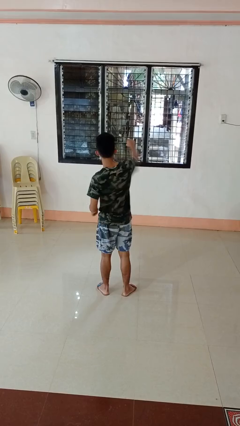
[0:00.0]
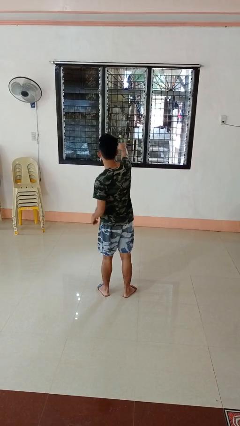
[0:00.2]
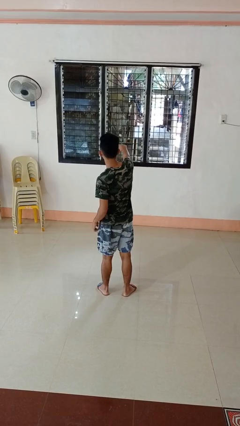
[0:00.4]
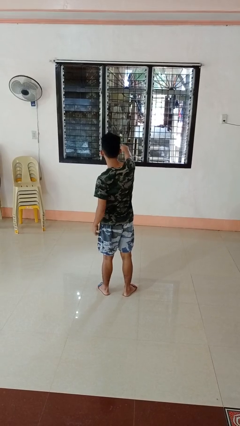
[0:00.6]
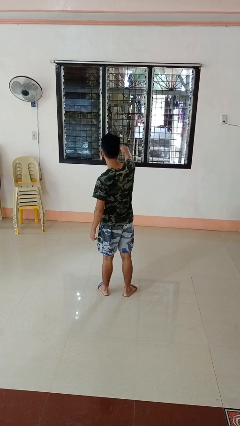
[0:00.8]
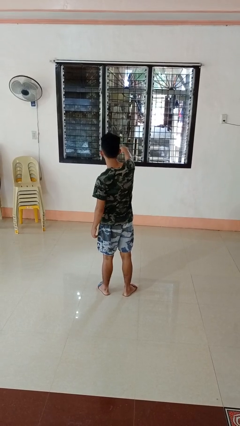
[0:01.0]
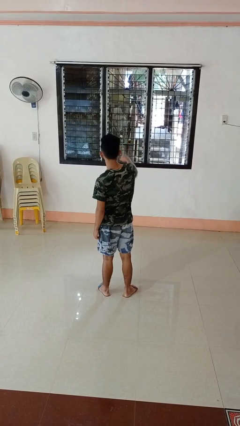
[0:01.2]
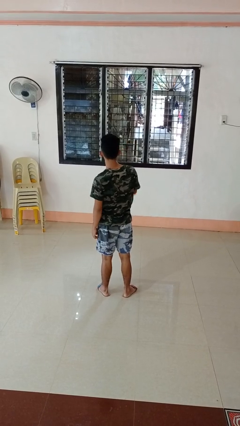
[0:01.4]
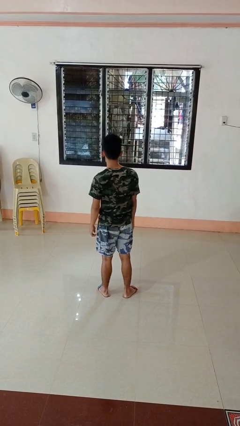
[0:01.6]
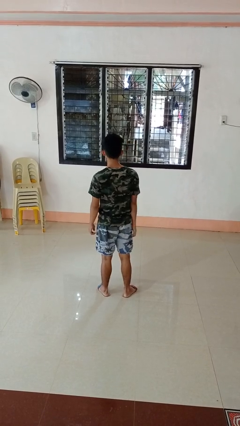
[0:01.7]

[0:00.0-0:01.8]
person punches

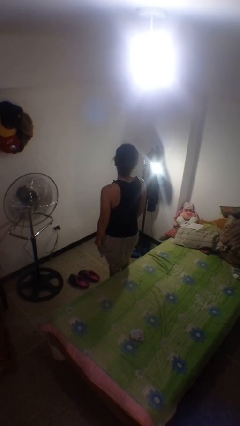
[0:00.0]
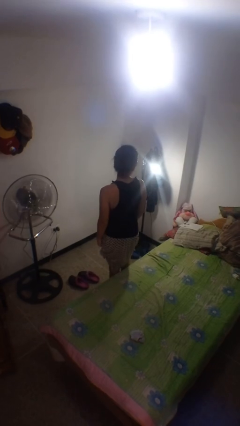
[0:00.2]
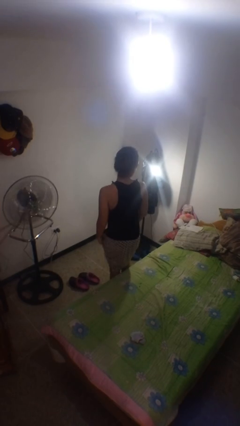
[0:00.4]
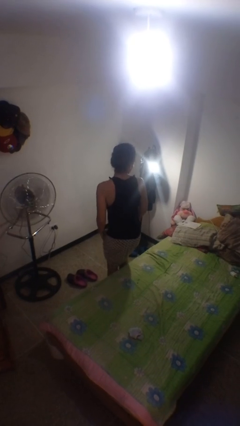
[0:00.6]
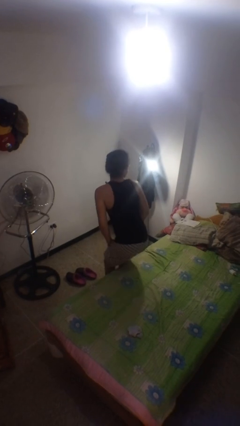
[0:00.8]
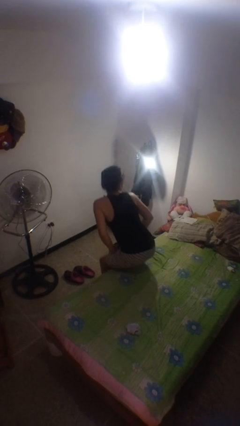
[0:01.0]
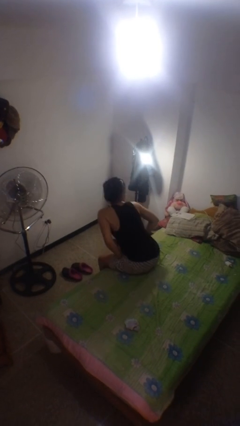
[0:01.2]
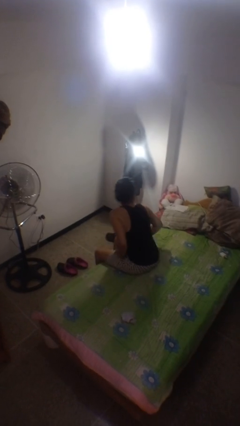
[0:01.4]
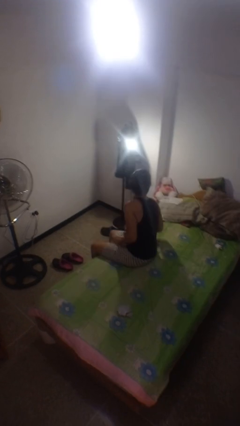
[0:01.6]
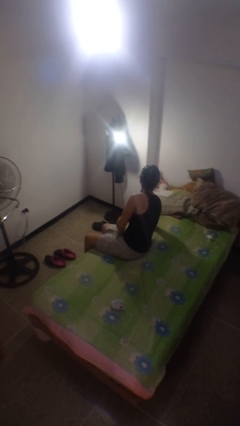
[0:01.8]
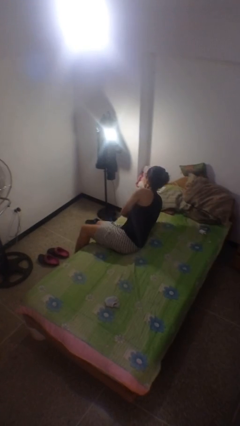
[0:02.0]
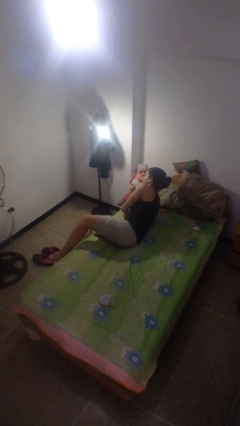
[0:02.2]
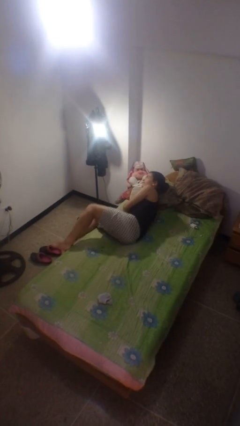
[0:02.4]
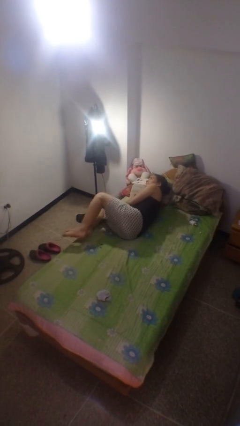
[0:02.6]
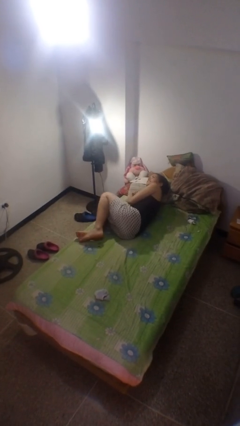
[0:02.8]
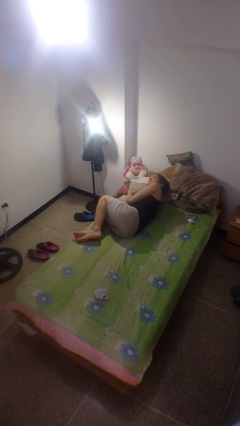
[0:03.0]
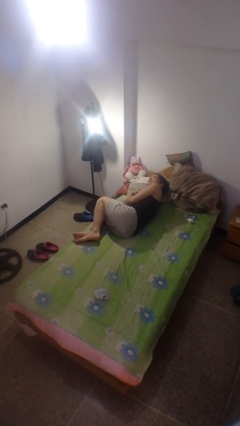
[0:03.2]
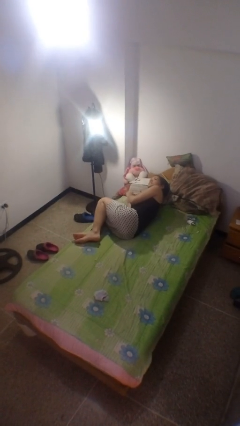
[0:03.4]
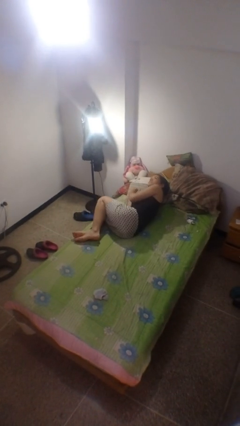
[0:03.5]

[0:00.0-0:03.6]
person lies down on bed

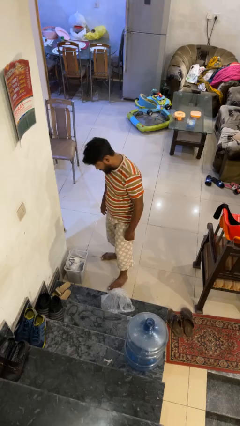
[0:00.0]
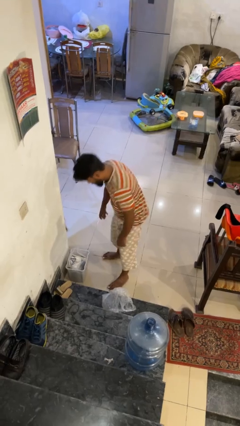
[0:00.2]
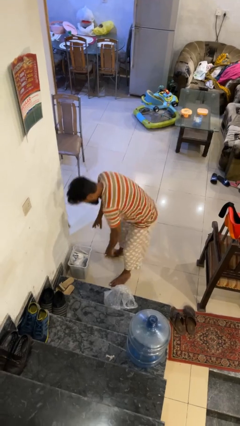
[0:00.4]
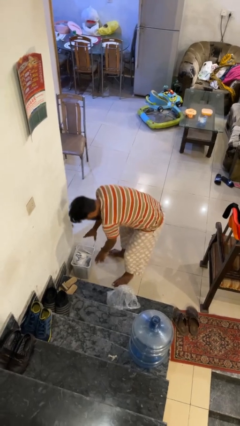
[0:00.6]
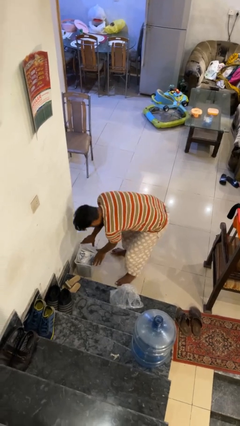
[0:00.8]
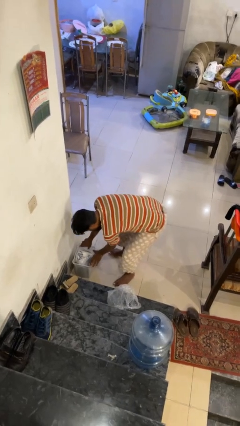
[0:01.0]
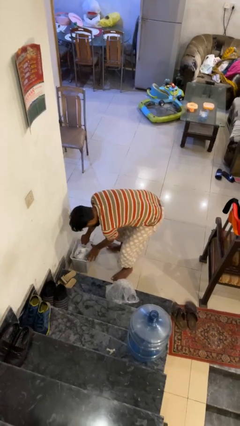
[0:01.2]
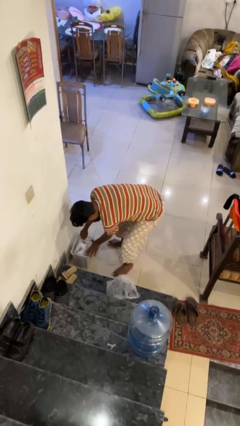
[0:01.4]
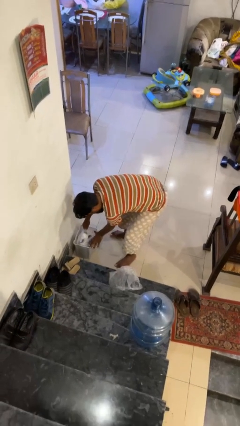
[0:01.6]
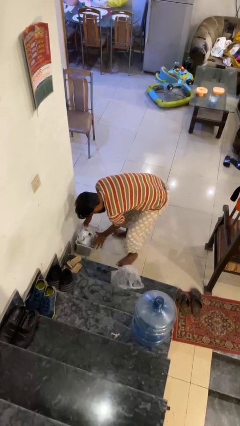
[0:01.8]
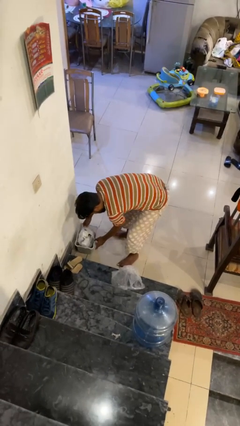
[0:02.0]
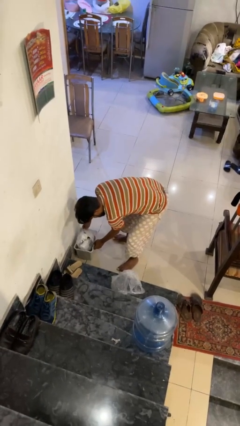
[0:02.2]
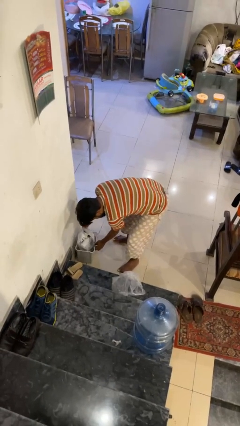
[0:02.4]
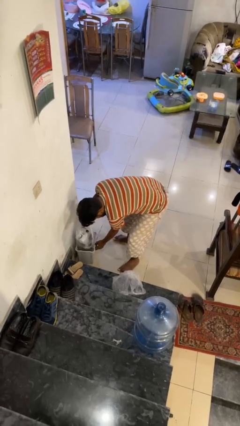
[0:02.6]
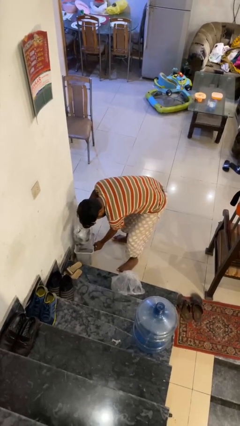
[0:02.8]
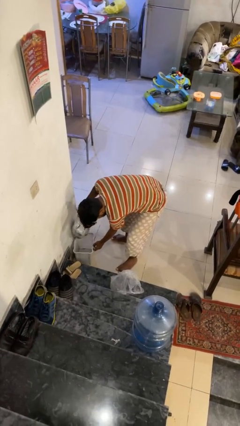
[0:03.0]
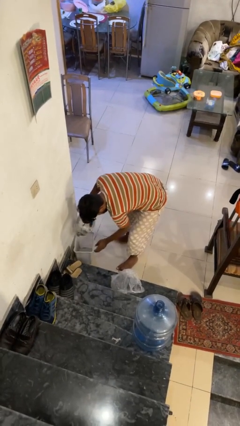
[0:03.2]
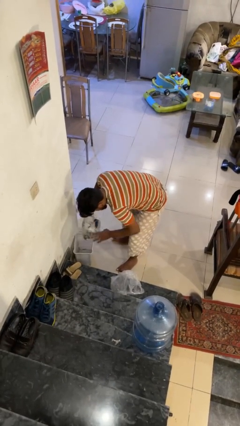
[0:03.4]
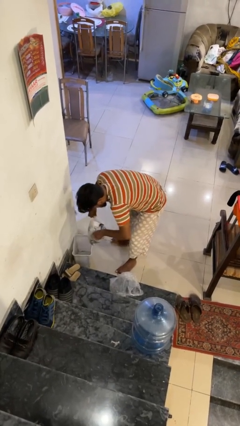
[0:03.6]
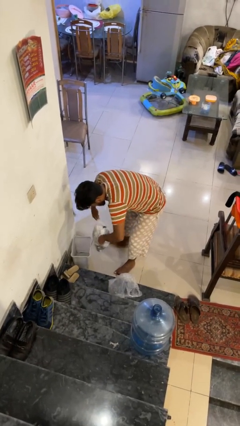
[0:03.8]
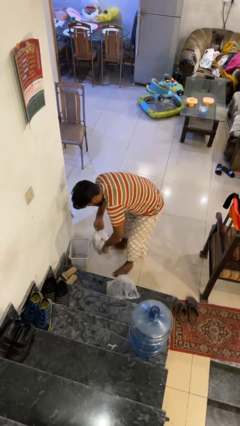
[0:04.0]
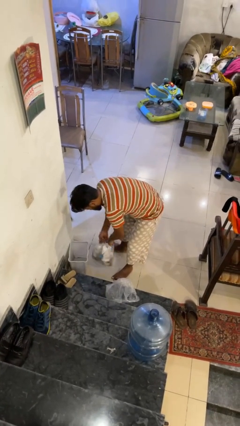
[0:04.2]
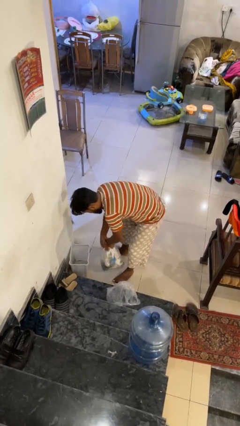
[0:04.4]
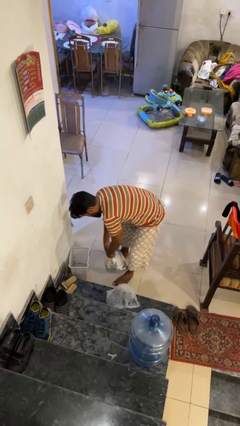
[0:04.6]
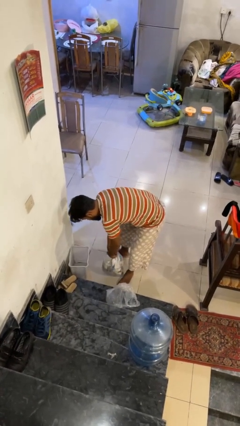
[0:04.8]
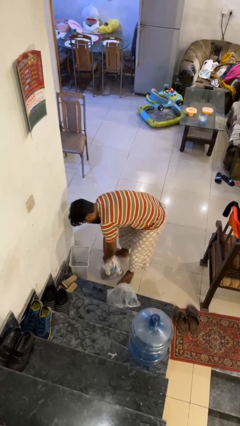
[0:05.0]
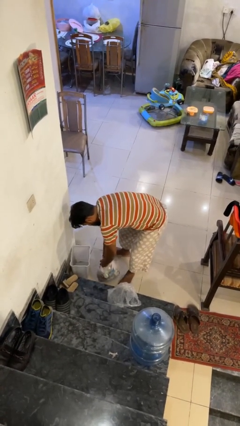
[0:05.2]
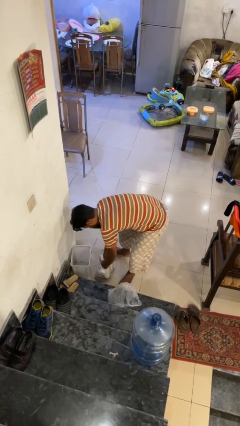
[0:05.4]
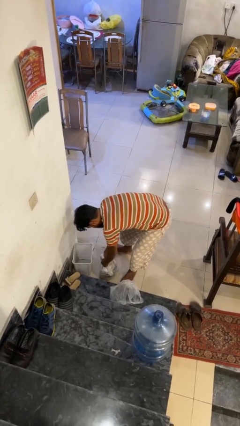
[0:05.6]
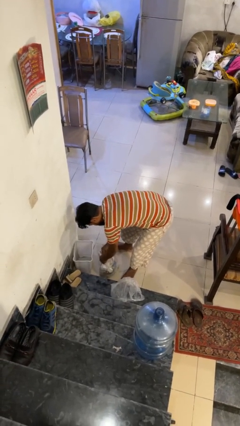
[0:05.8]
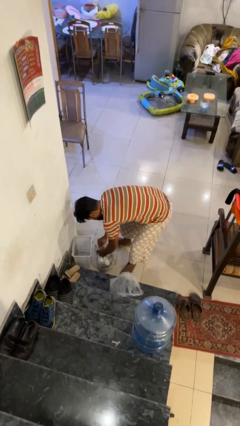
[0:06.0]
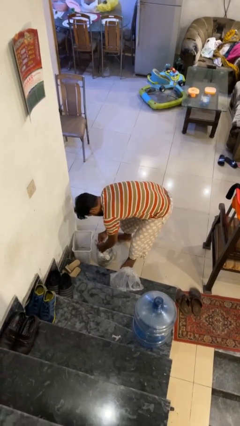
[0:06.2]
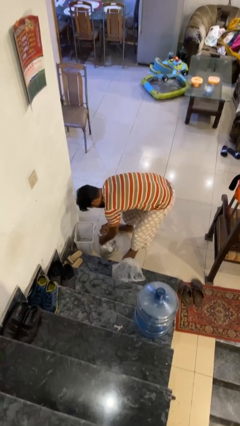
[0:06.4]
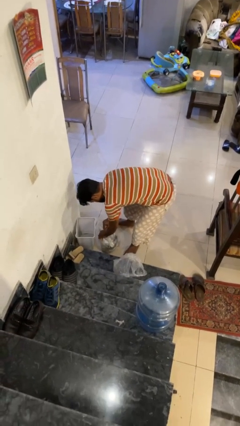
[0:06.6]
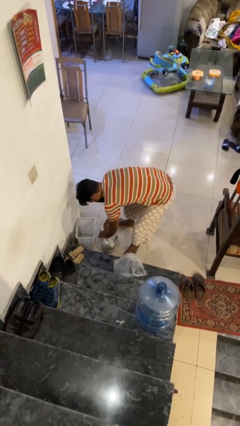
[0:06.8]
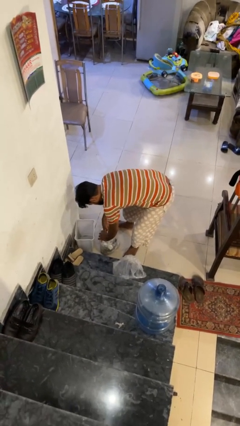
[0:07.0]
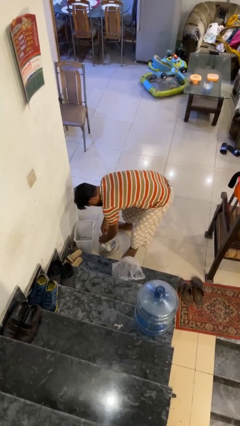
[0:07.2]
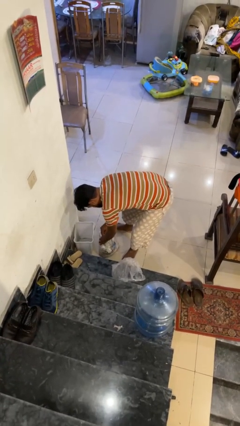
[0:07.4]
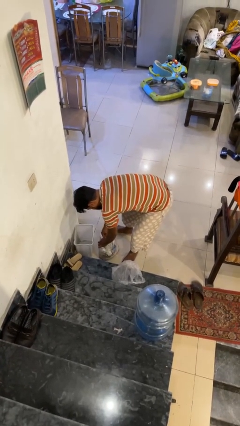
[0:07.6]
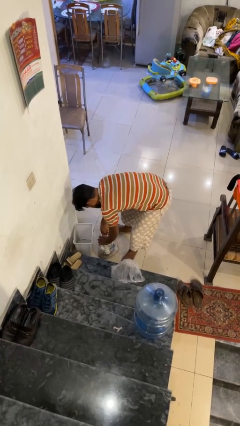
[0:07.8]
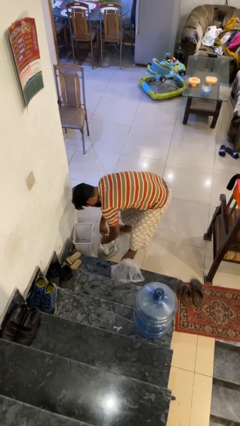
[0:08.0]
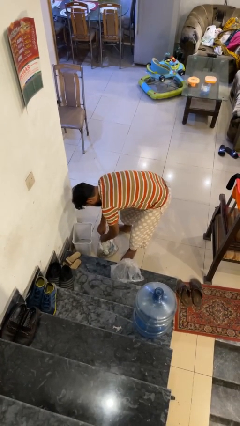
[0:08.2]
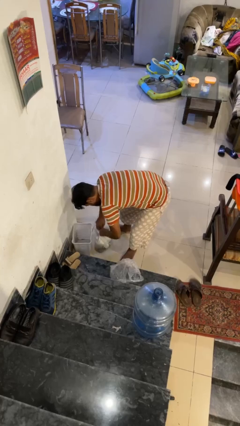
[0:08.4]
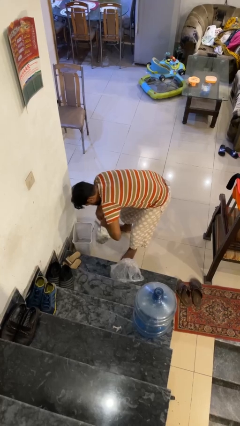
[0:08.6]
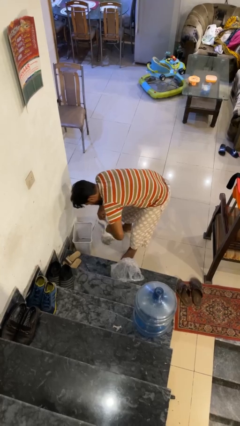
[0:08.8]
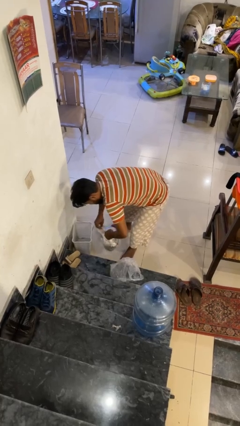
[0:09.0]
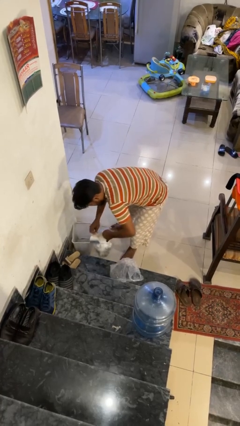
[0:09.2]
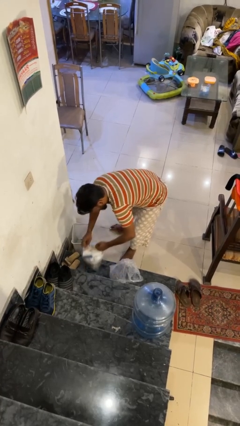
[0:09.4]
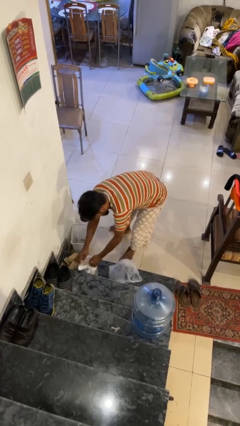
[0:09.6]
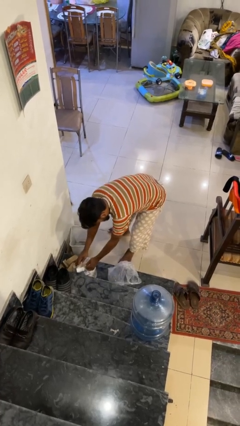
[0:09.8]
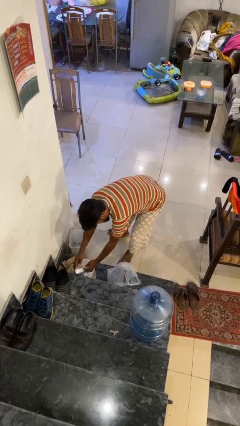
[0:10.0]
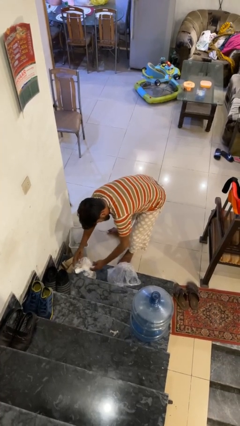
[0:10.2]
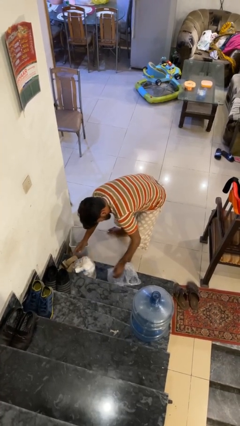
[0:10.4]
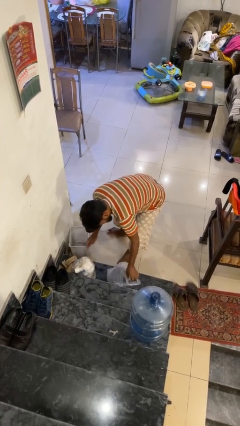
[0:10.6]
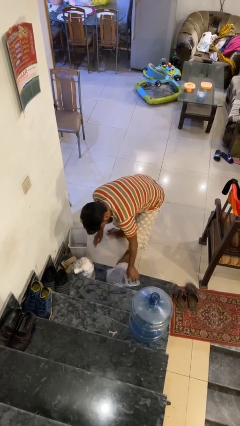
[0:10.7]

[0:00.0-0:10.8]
person removes trashbag from trashcan

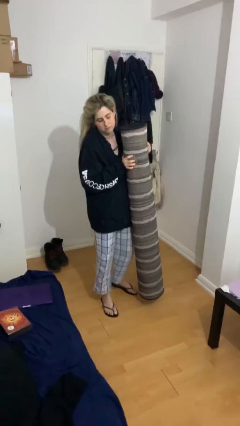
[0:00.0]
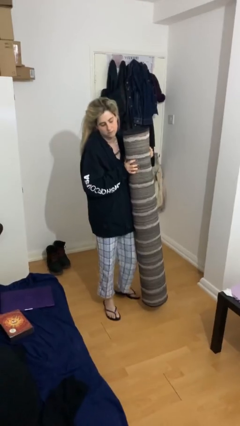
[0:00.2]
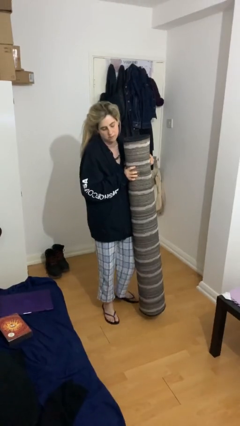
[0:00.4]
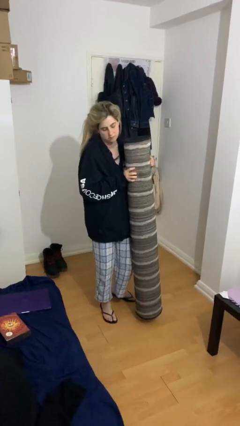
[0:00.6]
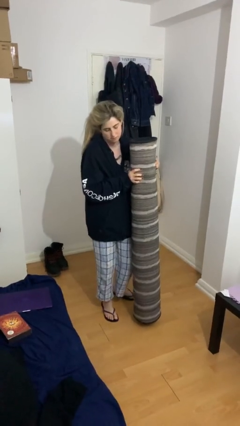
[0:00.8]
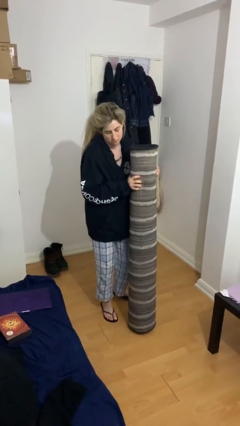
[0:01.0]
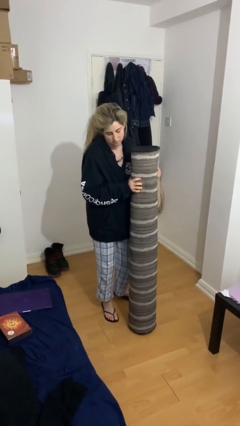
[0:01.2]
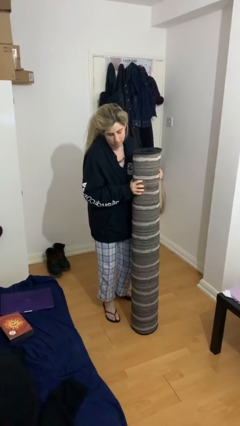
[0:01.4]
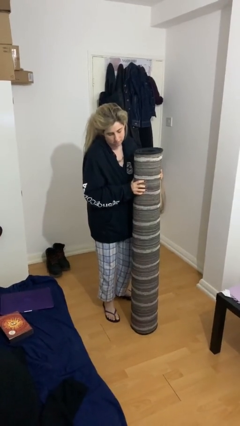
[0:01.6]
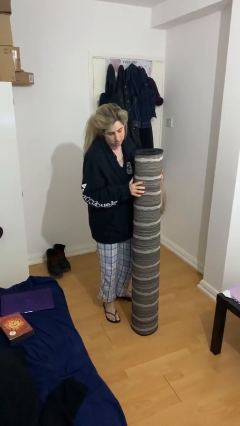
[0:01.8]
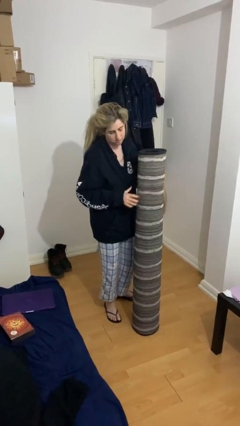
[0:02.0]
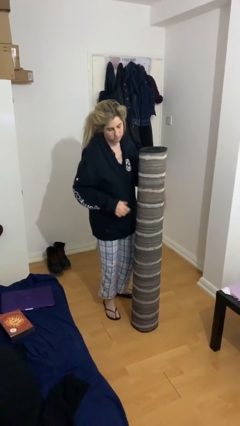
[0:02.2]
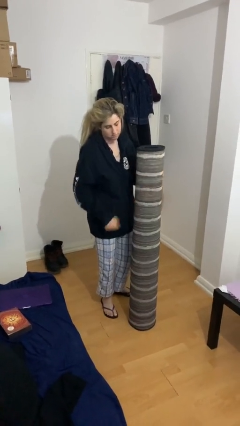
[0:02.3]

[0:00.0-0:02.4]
person puts down object on floor
